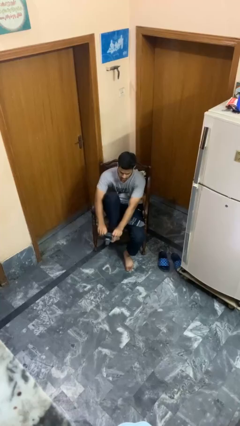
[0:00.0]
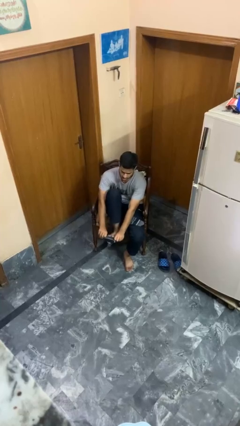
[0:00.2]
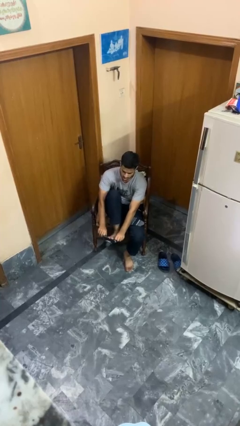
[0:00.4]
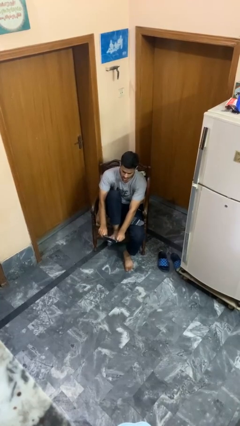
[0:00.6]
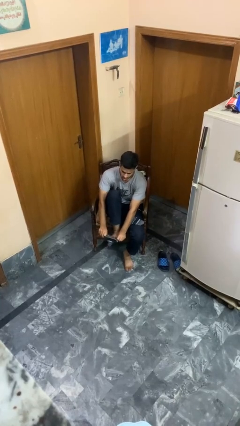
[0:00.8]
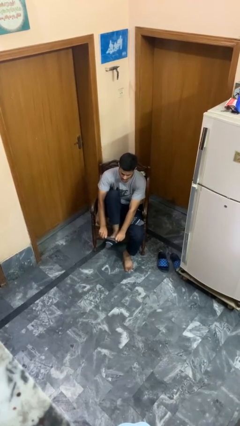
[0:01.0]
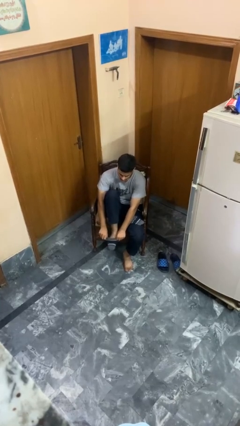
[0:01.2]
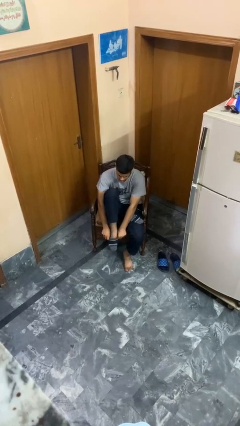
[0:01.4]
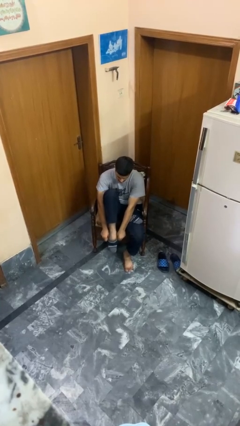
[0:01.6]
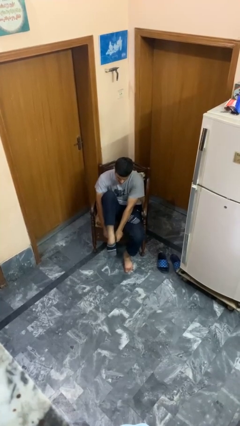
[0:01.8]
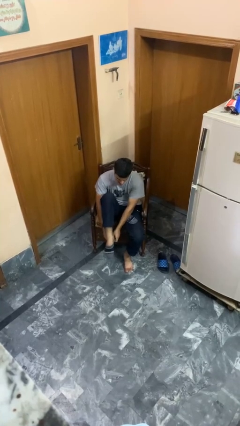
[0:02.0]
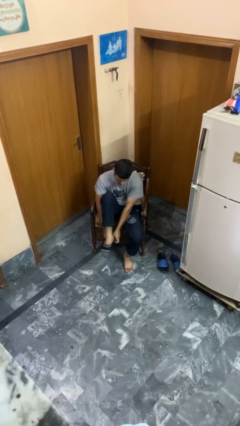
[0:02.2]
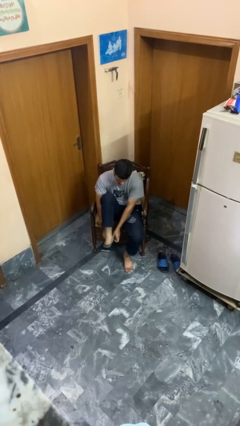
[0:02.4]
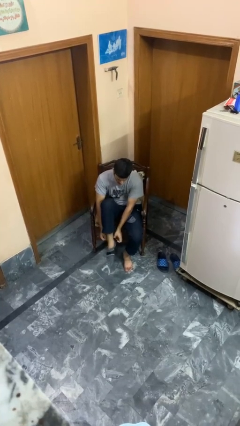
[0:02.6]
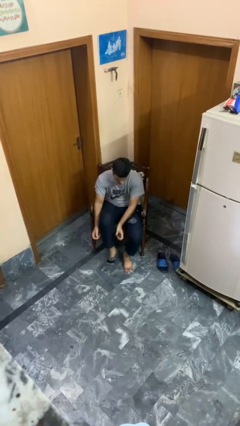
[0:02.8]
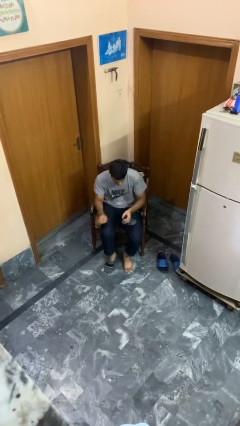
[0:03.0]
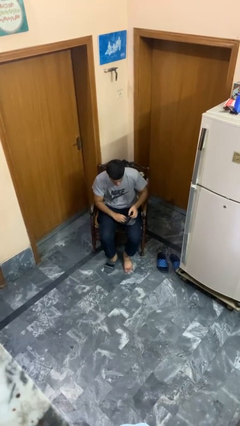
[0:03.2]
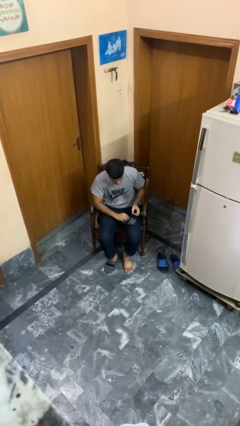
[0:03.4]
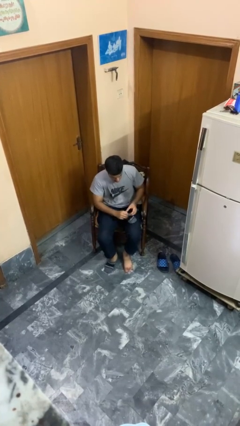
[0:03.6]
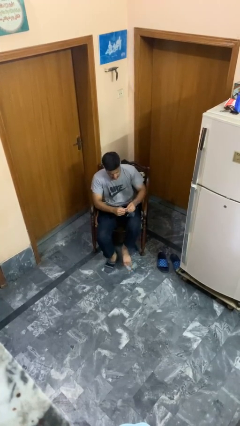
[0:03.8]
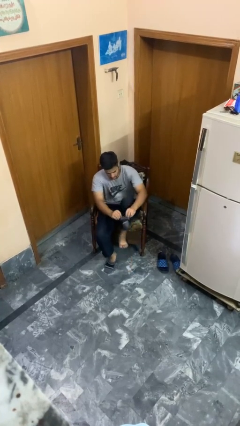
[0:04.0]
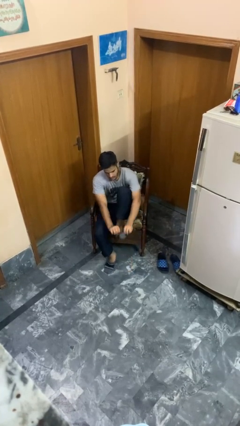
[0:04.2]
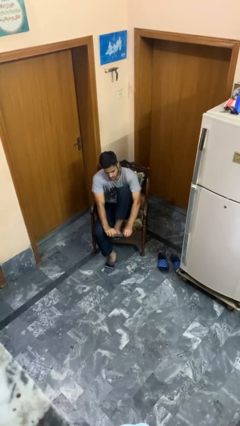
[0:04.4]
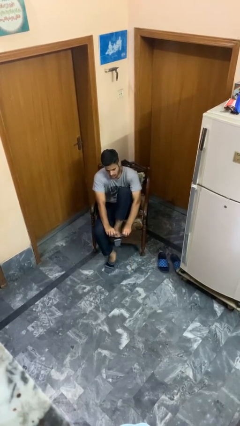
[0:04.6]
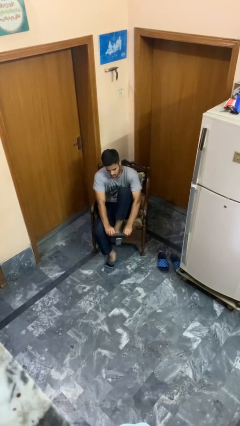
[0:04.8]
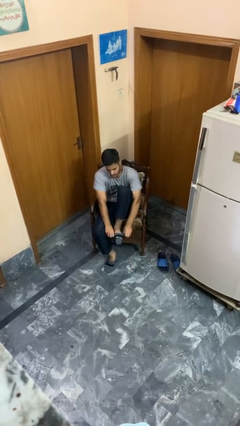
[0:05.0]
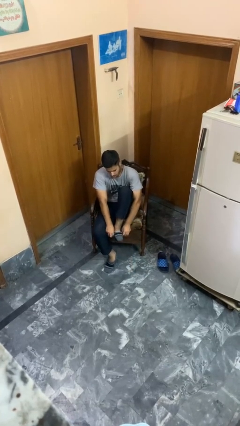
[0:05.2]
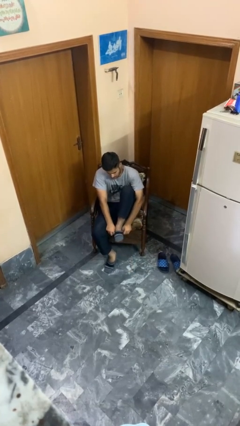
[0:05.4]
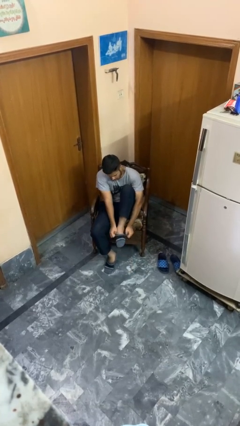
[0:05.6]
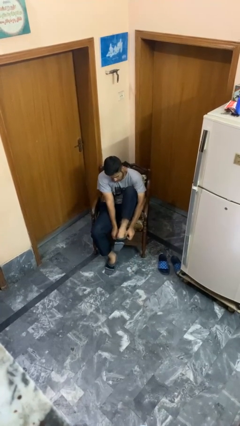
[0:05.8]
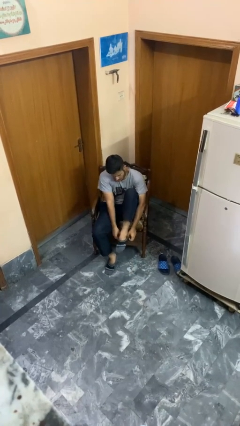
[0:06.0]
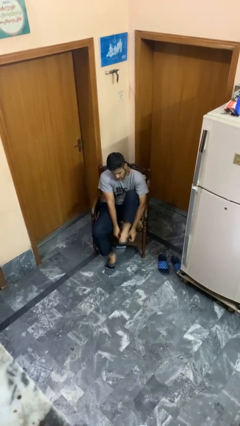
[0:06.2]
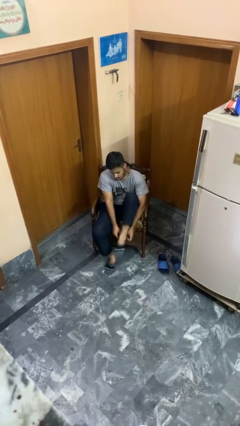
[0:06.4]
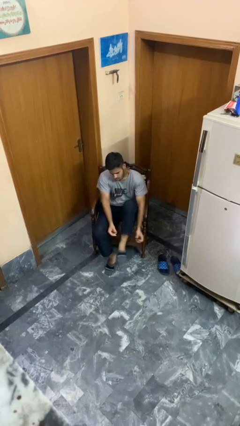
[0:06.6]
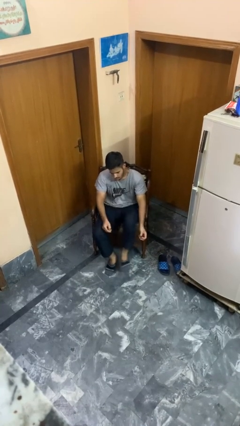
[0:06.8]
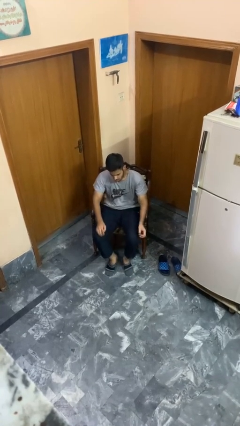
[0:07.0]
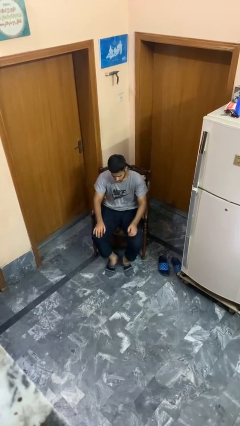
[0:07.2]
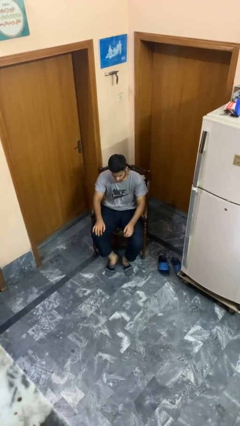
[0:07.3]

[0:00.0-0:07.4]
person puts on socks

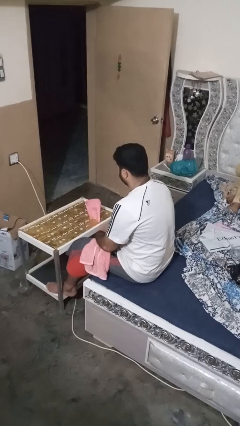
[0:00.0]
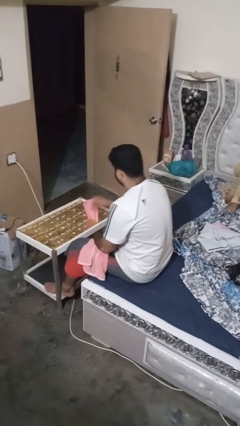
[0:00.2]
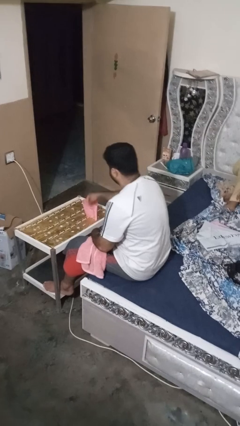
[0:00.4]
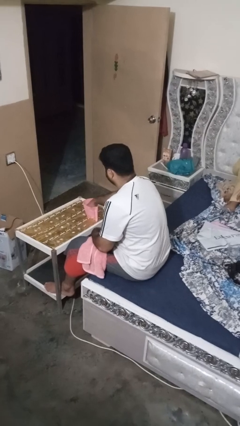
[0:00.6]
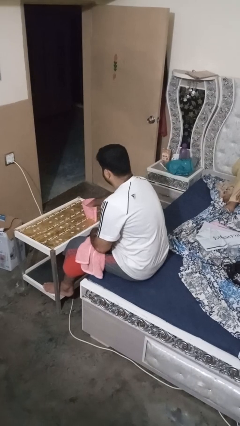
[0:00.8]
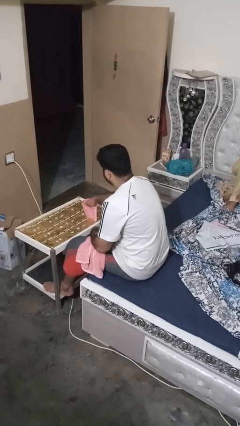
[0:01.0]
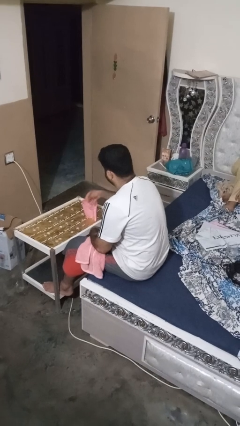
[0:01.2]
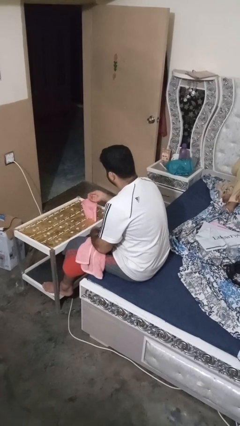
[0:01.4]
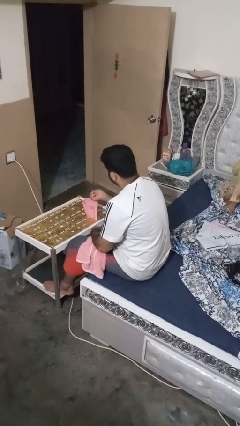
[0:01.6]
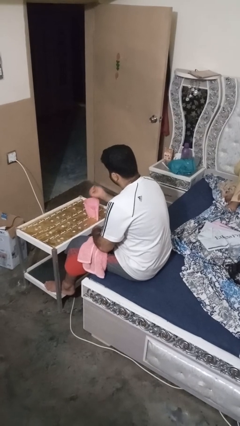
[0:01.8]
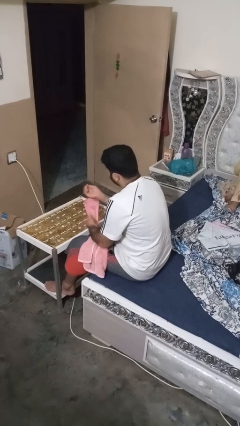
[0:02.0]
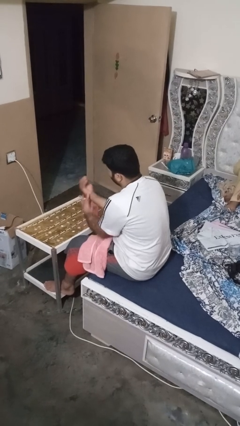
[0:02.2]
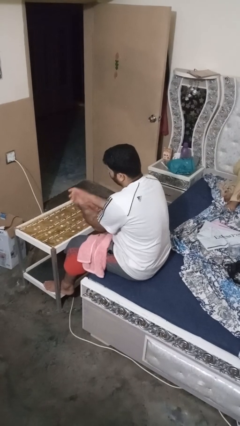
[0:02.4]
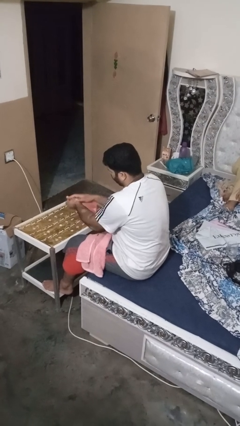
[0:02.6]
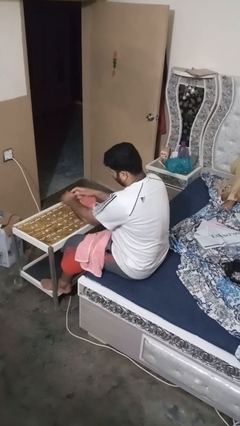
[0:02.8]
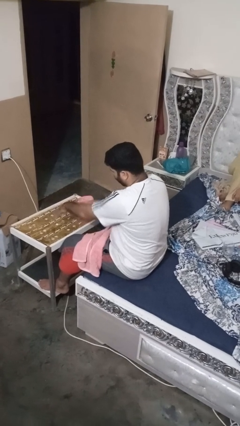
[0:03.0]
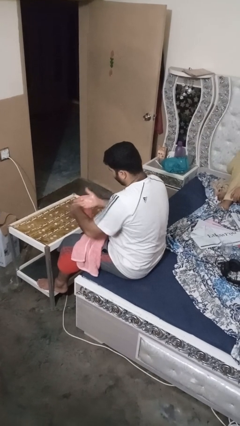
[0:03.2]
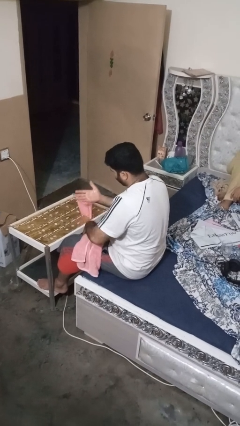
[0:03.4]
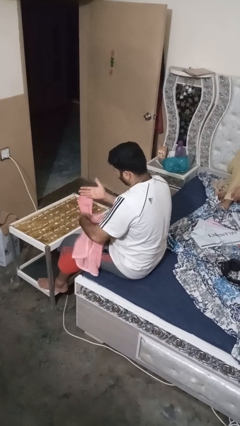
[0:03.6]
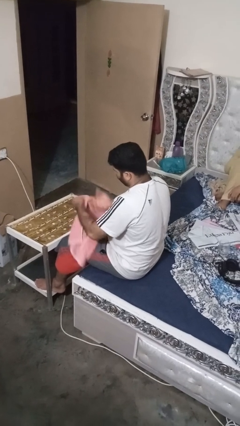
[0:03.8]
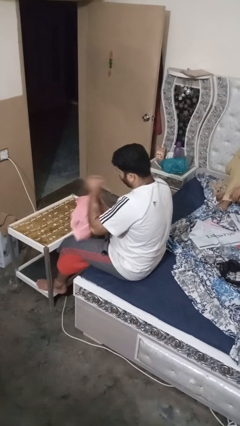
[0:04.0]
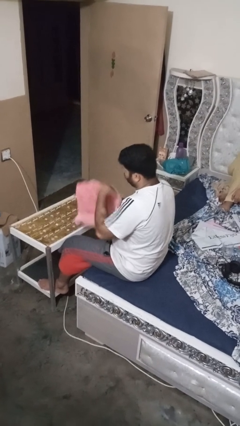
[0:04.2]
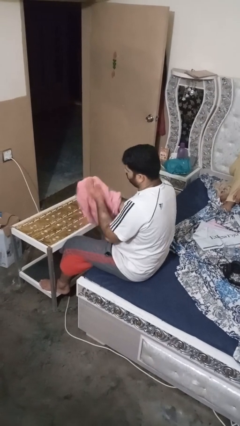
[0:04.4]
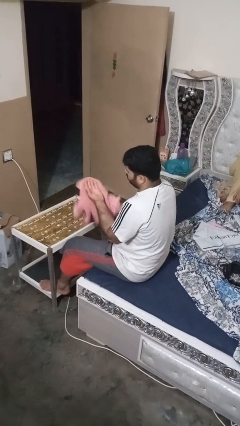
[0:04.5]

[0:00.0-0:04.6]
person washes hands

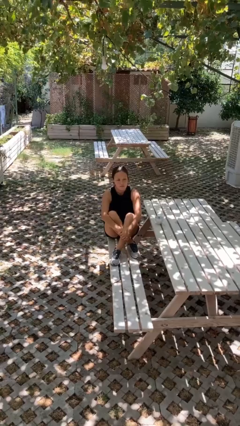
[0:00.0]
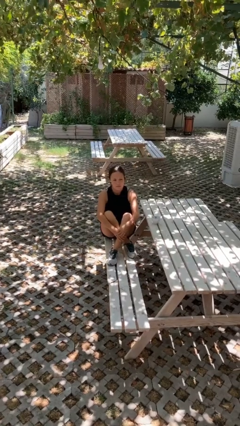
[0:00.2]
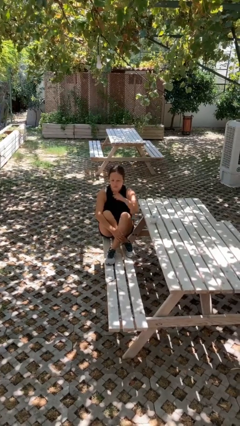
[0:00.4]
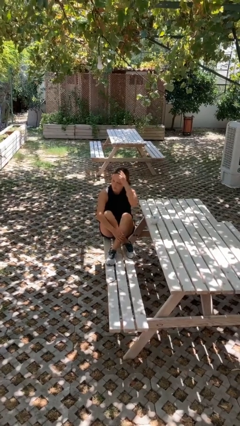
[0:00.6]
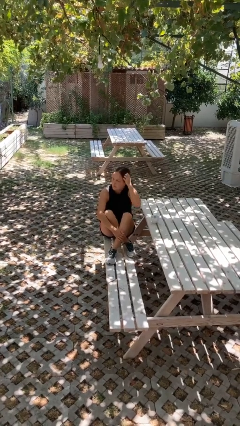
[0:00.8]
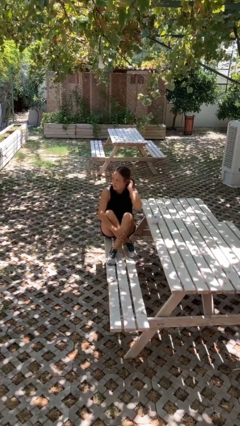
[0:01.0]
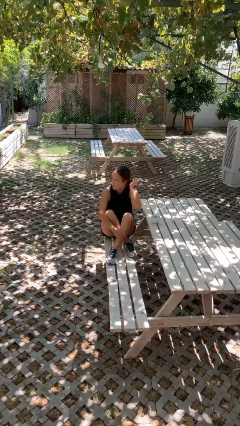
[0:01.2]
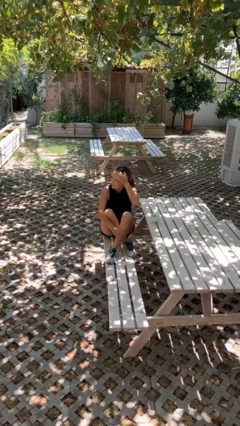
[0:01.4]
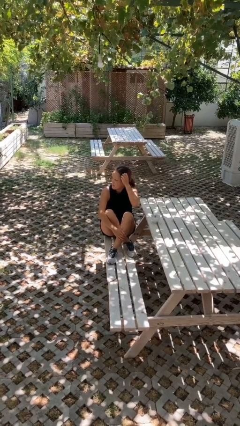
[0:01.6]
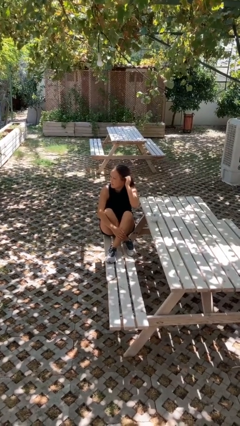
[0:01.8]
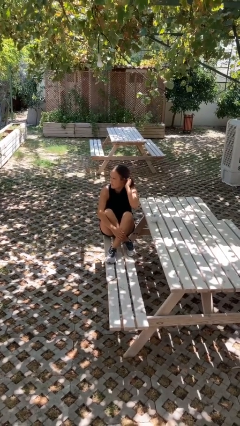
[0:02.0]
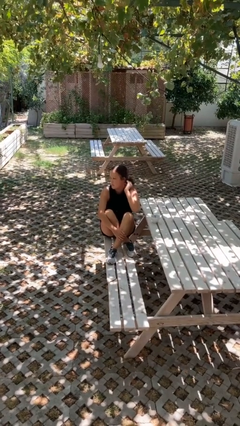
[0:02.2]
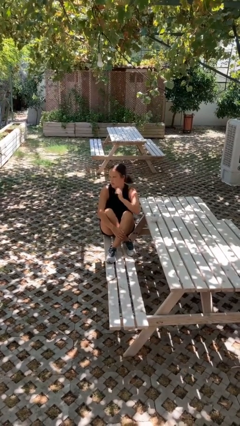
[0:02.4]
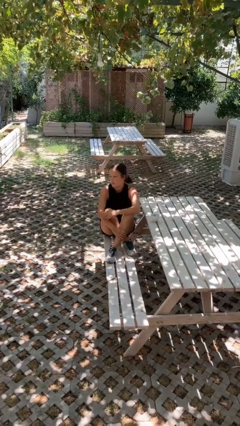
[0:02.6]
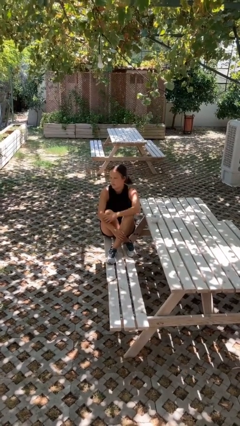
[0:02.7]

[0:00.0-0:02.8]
person strokes hair

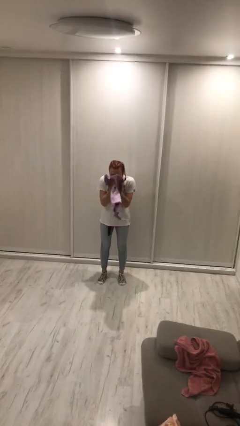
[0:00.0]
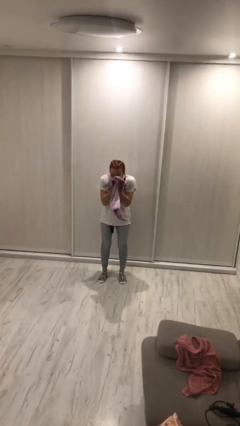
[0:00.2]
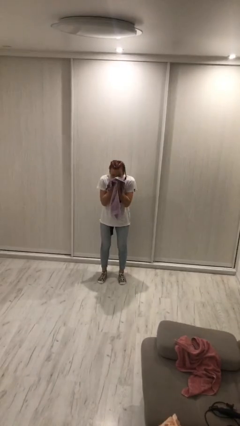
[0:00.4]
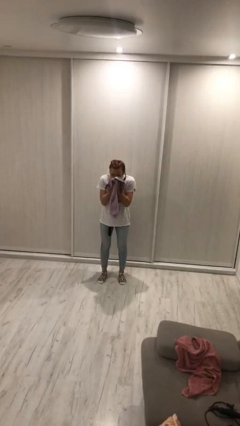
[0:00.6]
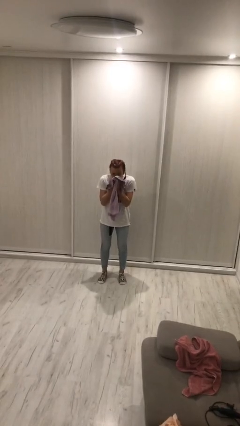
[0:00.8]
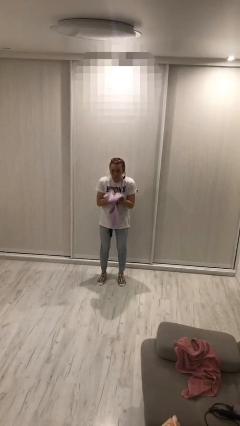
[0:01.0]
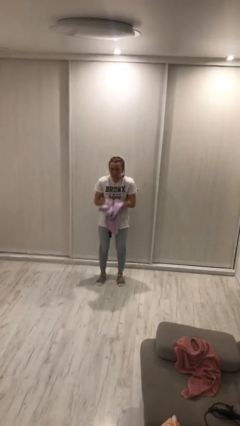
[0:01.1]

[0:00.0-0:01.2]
person blows nose

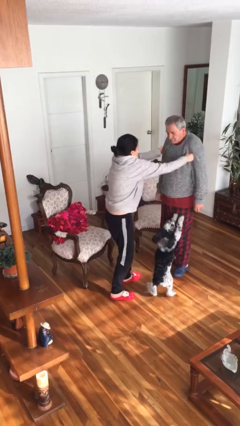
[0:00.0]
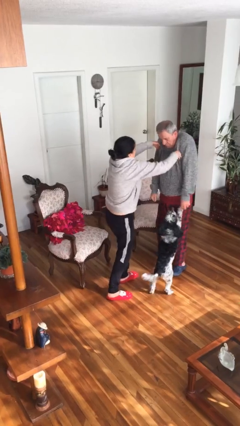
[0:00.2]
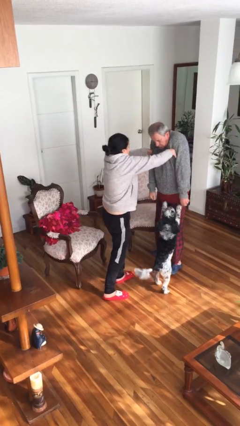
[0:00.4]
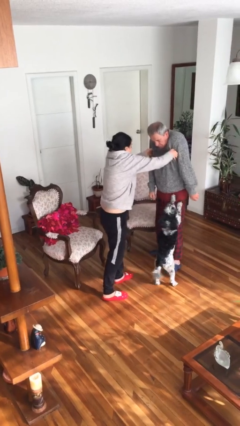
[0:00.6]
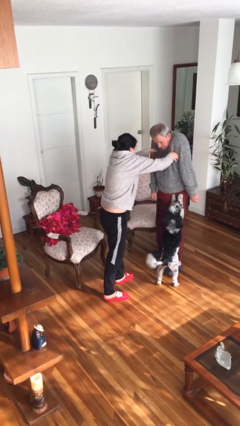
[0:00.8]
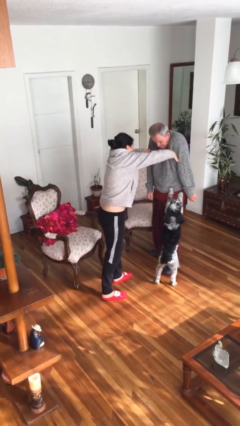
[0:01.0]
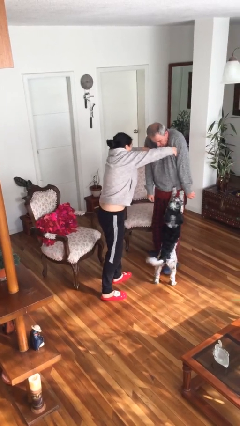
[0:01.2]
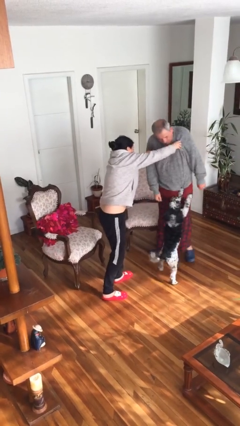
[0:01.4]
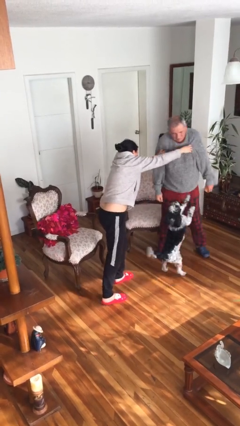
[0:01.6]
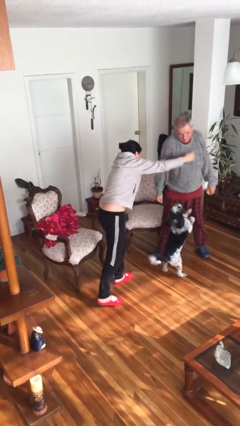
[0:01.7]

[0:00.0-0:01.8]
person tickles person
